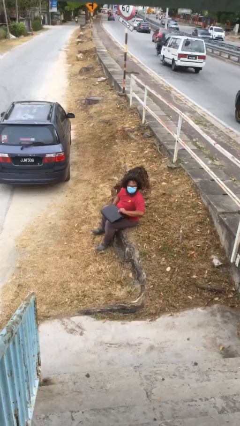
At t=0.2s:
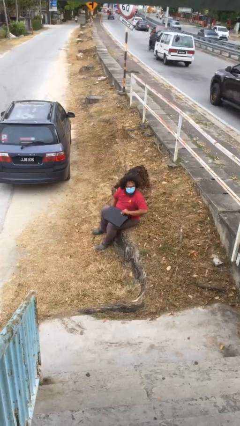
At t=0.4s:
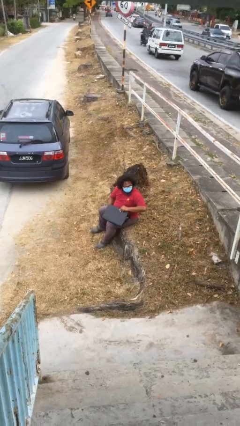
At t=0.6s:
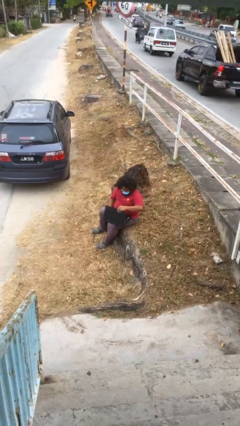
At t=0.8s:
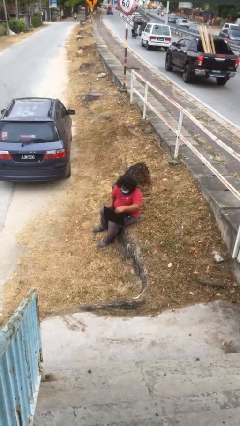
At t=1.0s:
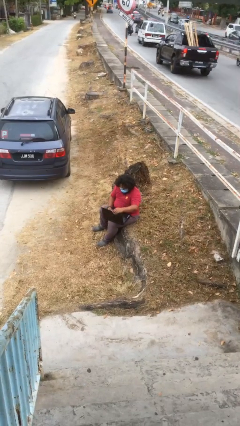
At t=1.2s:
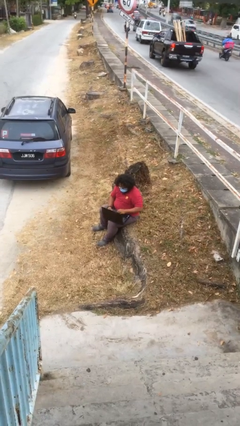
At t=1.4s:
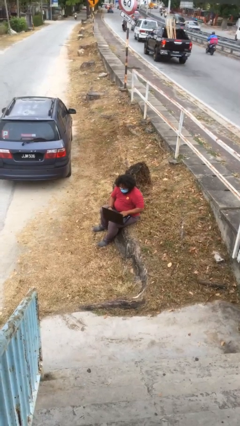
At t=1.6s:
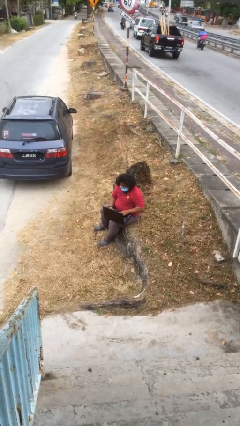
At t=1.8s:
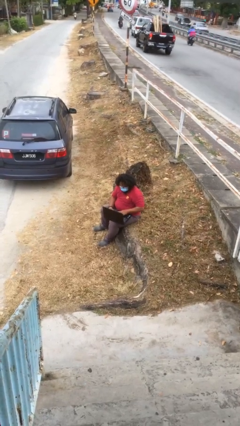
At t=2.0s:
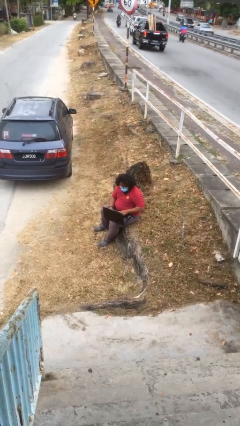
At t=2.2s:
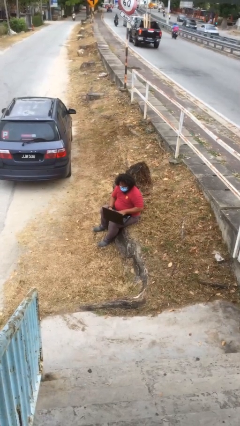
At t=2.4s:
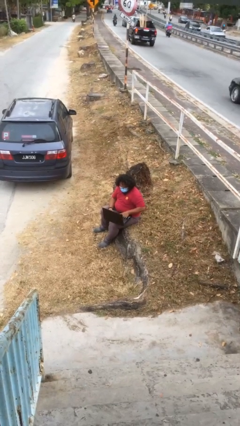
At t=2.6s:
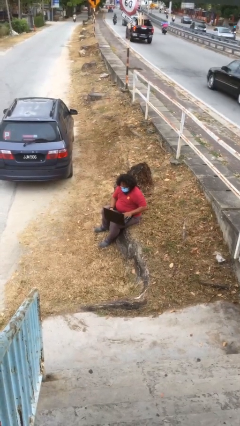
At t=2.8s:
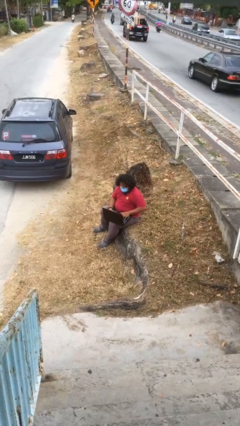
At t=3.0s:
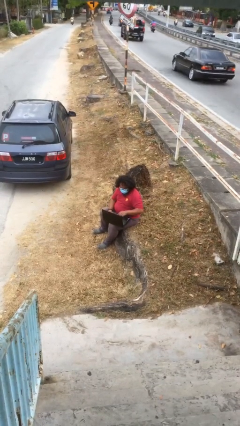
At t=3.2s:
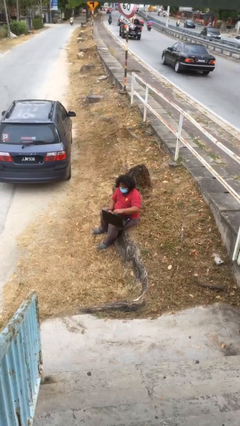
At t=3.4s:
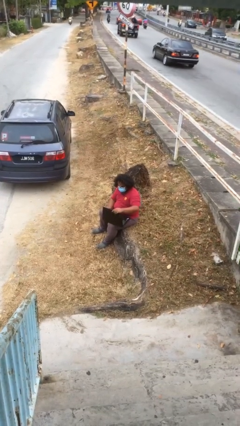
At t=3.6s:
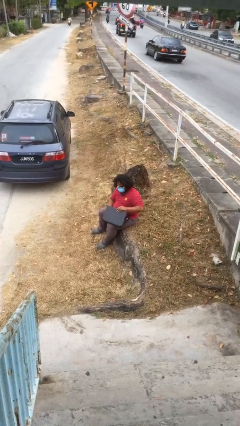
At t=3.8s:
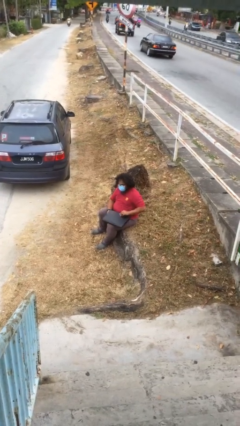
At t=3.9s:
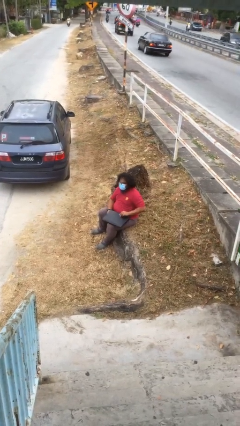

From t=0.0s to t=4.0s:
person interacts with laptop

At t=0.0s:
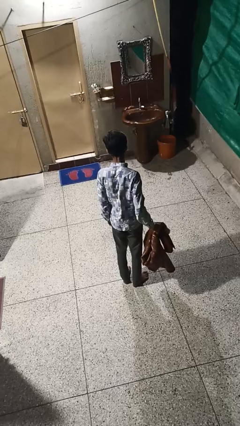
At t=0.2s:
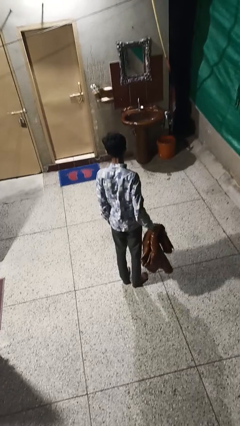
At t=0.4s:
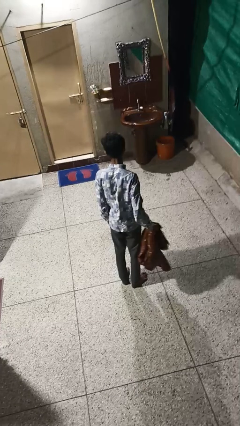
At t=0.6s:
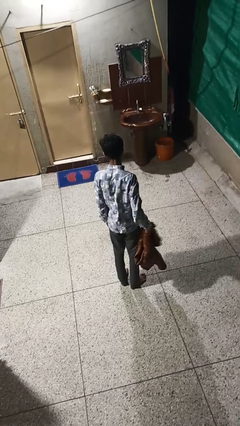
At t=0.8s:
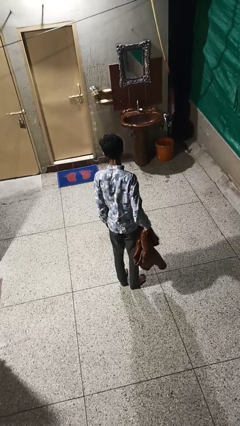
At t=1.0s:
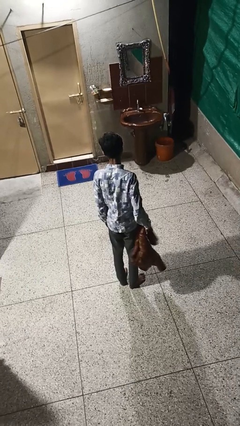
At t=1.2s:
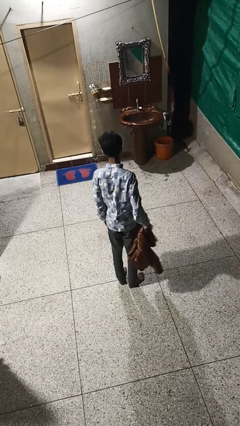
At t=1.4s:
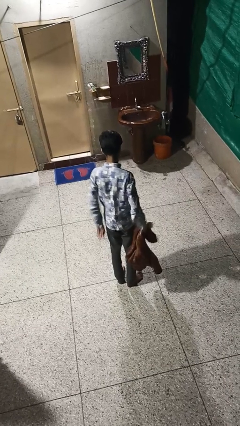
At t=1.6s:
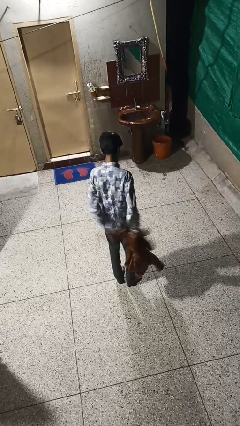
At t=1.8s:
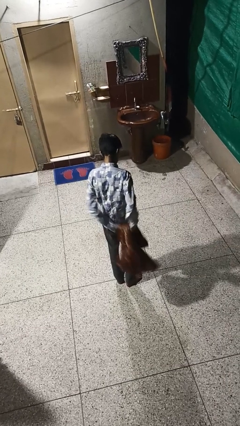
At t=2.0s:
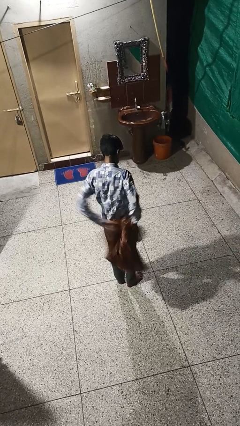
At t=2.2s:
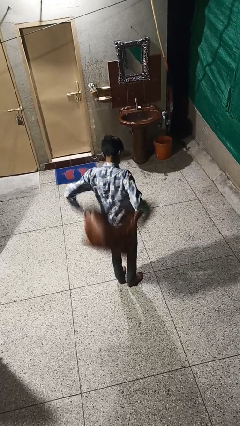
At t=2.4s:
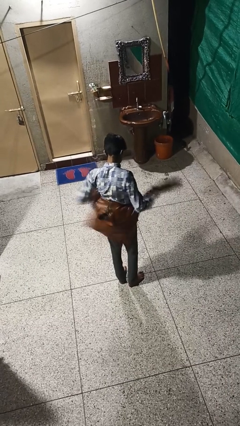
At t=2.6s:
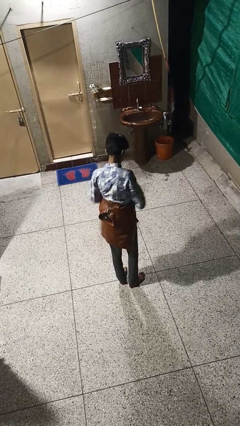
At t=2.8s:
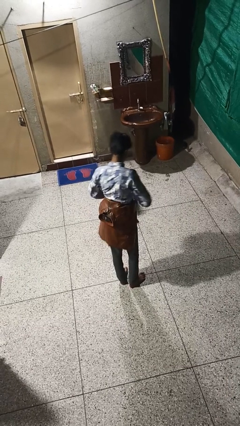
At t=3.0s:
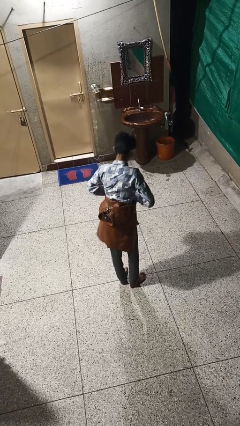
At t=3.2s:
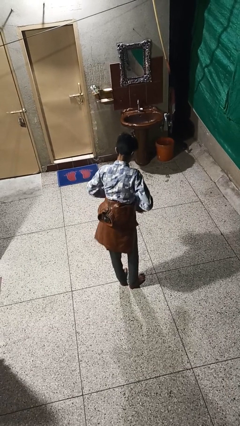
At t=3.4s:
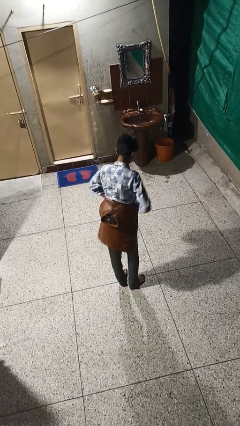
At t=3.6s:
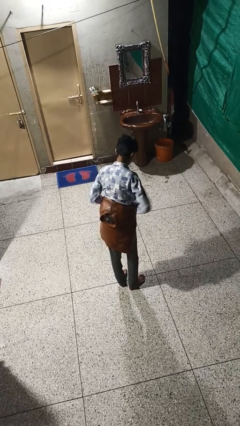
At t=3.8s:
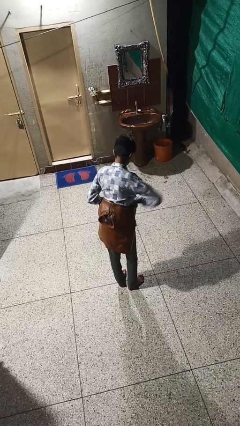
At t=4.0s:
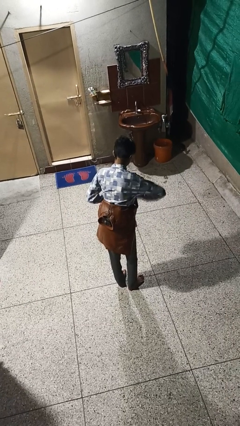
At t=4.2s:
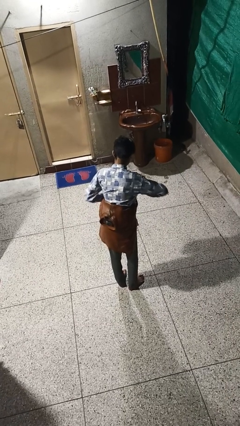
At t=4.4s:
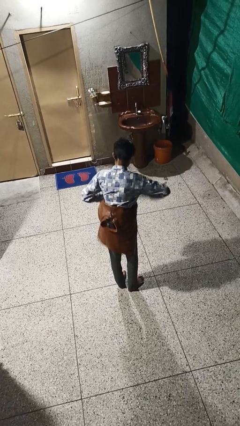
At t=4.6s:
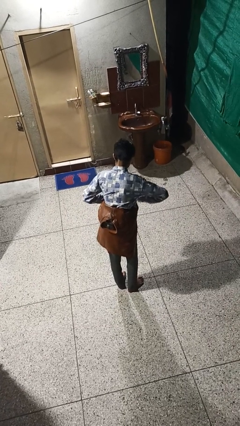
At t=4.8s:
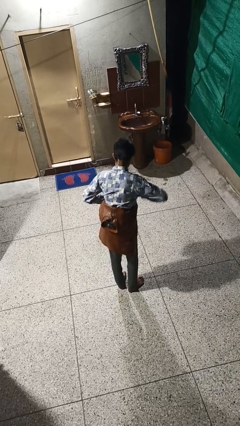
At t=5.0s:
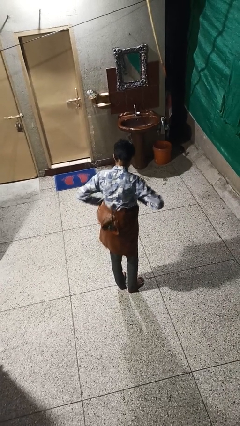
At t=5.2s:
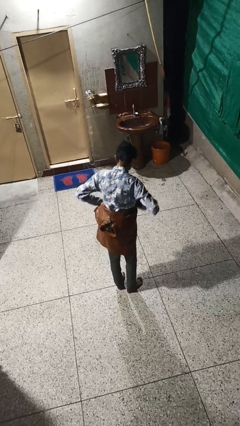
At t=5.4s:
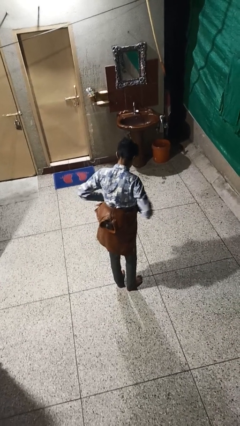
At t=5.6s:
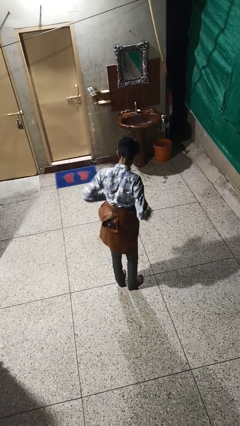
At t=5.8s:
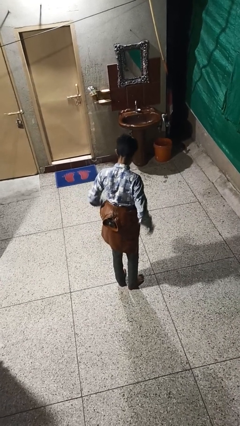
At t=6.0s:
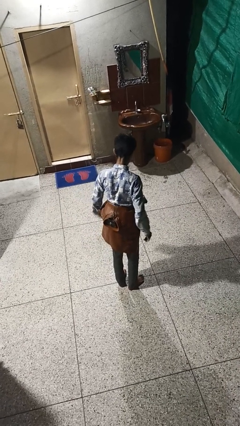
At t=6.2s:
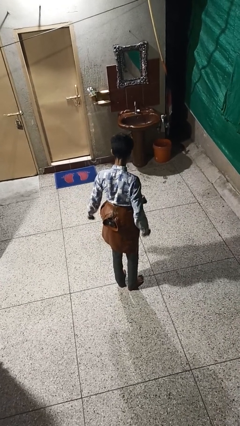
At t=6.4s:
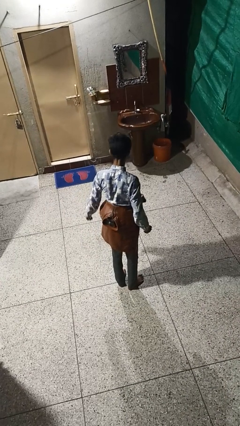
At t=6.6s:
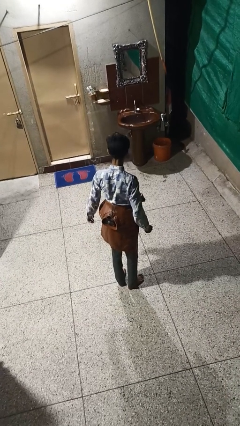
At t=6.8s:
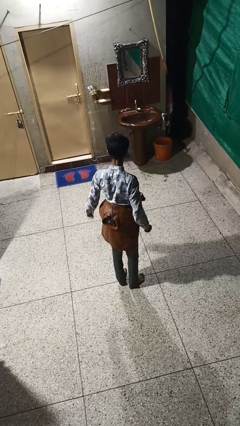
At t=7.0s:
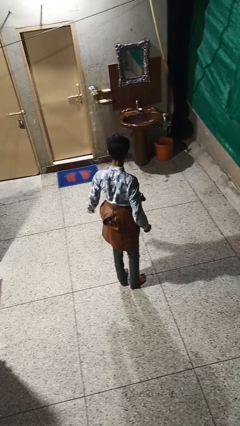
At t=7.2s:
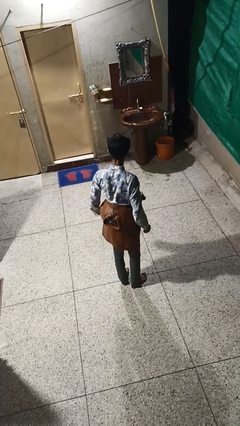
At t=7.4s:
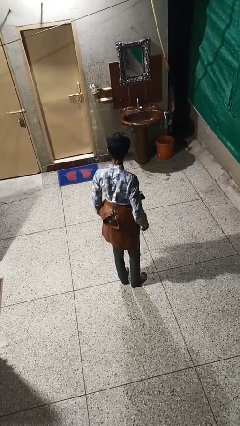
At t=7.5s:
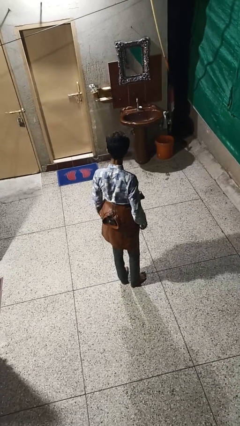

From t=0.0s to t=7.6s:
person ties jacket around waist

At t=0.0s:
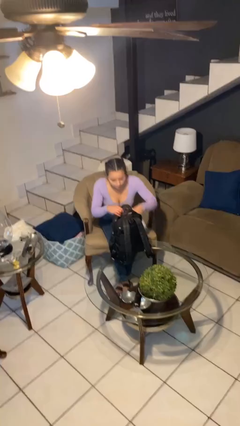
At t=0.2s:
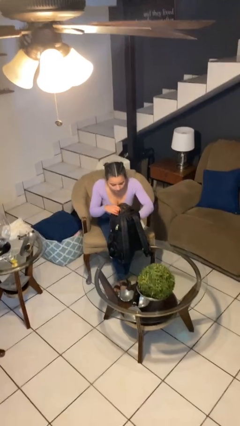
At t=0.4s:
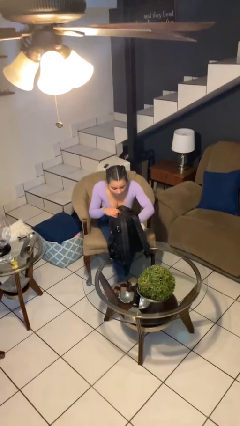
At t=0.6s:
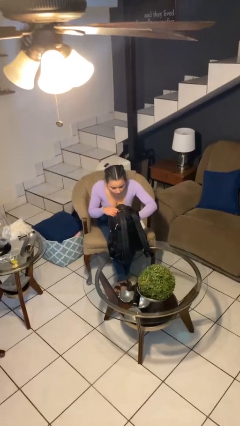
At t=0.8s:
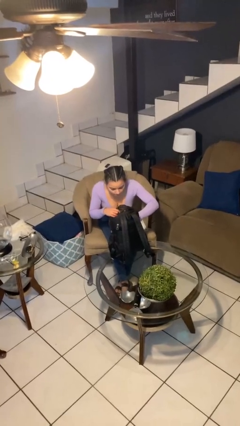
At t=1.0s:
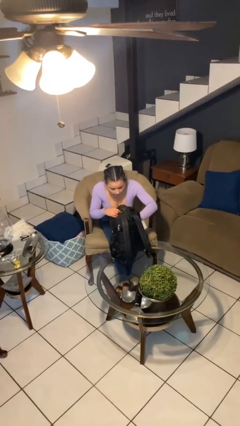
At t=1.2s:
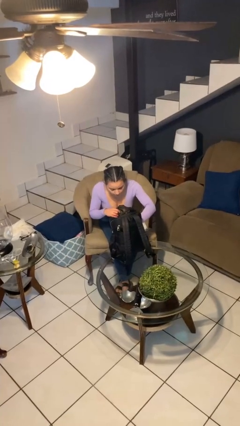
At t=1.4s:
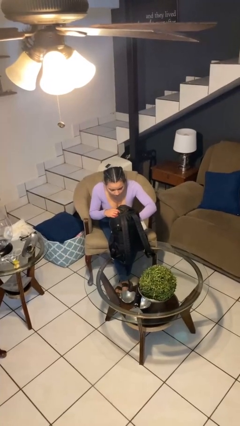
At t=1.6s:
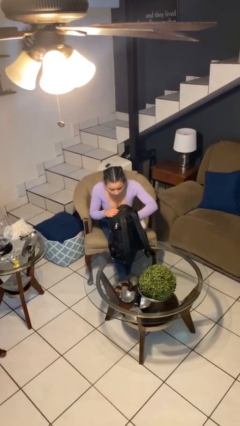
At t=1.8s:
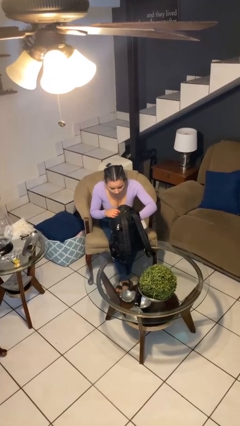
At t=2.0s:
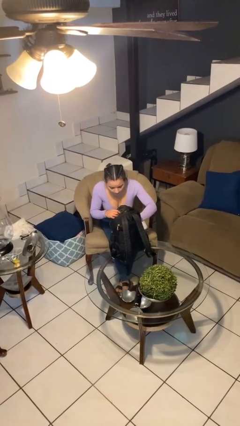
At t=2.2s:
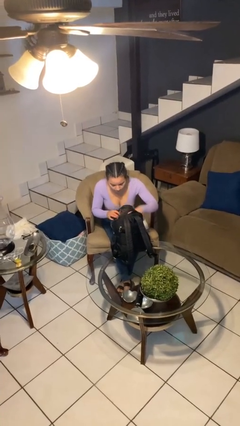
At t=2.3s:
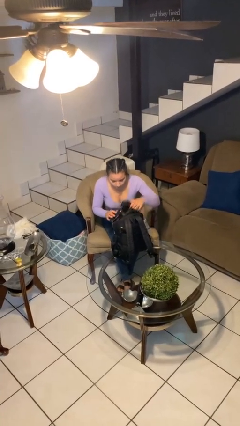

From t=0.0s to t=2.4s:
person searches in backpack

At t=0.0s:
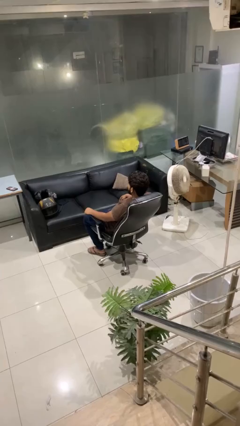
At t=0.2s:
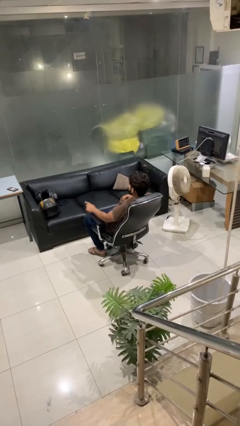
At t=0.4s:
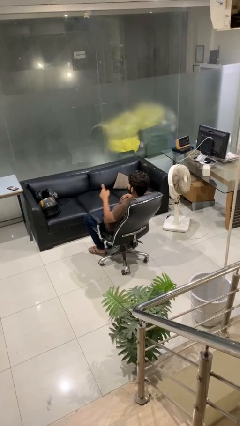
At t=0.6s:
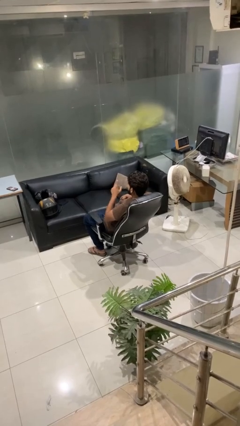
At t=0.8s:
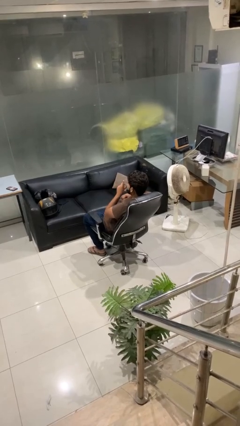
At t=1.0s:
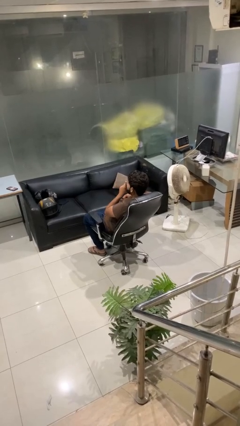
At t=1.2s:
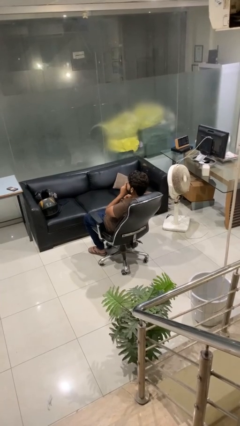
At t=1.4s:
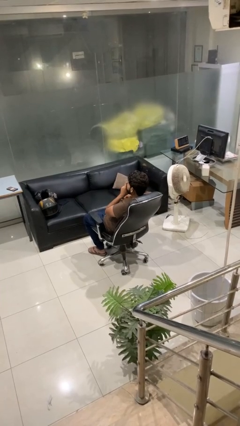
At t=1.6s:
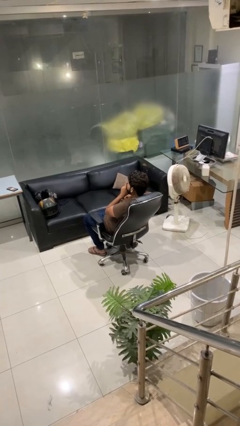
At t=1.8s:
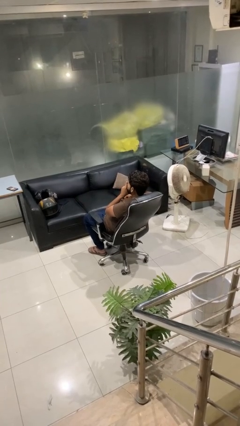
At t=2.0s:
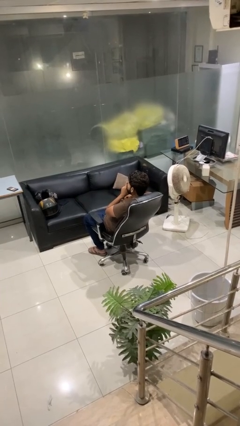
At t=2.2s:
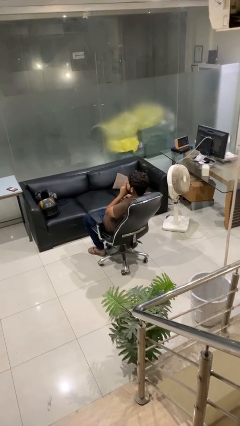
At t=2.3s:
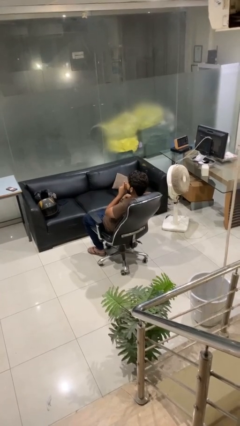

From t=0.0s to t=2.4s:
person gestures be quiet

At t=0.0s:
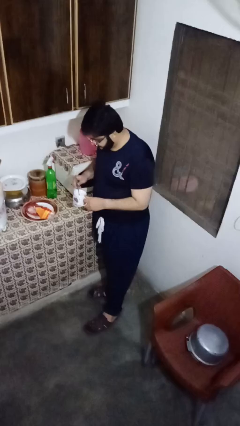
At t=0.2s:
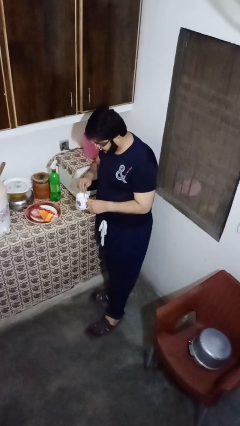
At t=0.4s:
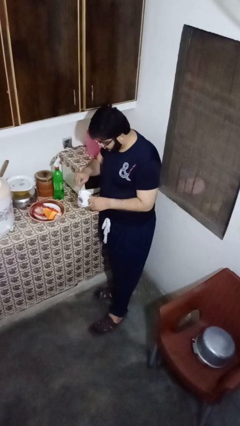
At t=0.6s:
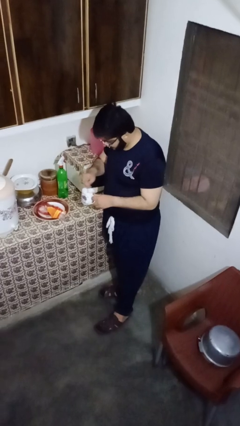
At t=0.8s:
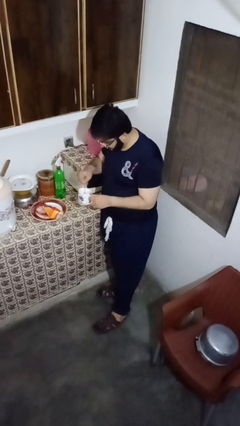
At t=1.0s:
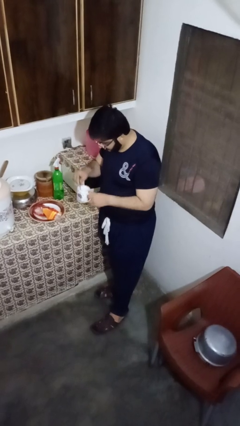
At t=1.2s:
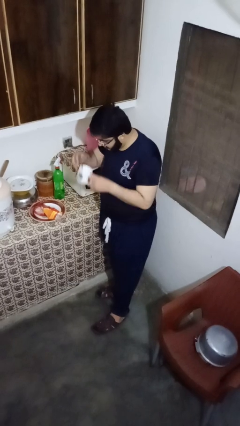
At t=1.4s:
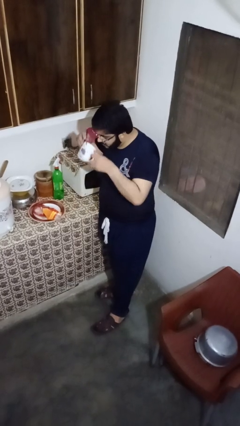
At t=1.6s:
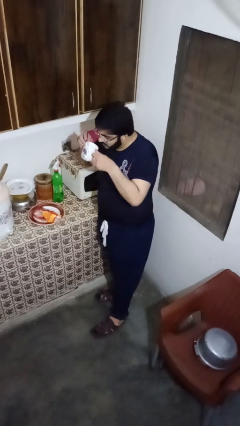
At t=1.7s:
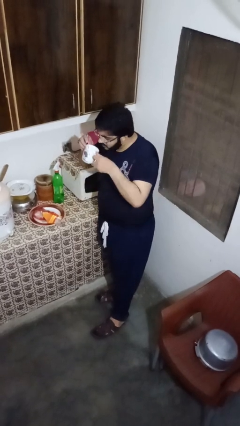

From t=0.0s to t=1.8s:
person stirs mug
